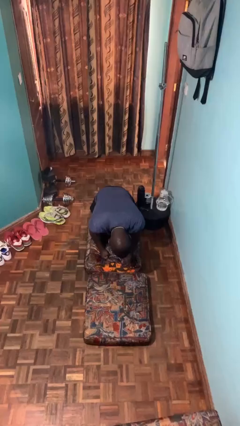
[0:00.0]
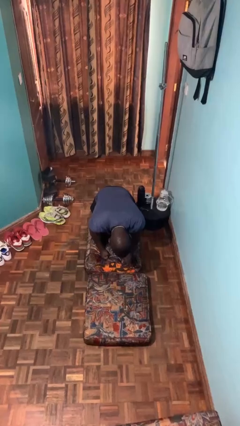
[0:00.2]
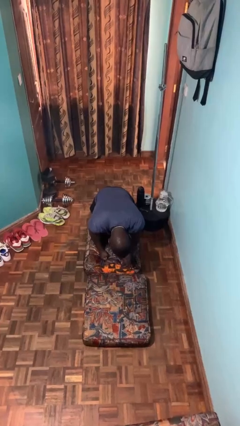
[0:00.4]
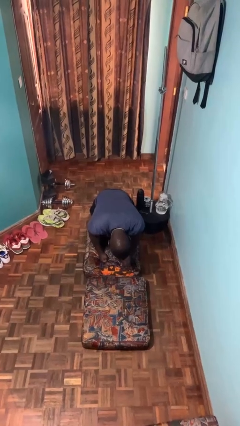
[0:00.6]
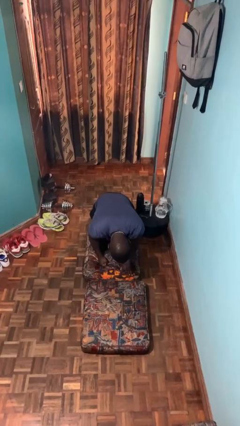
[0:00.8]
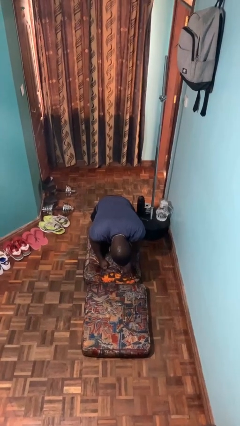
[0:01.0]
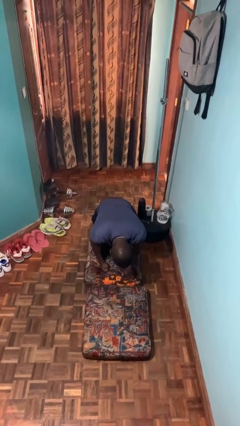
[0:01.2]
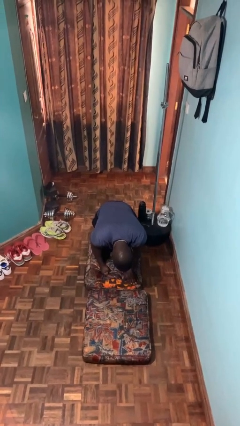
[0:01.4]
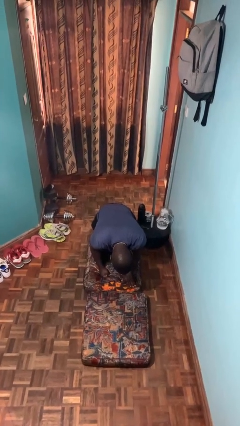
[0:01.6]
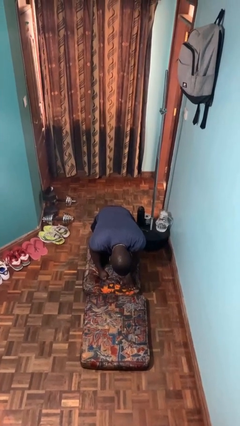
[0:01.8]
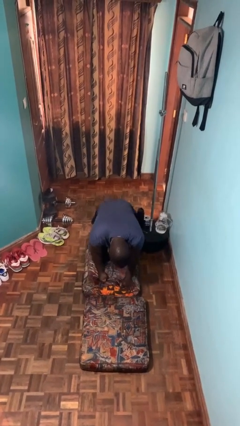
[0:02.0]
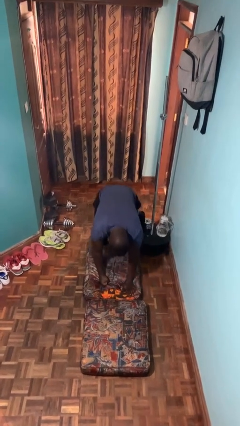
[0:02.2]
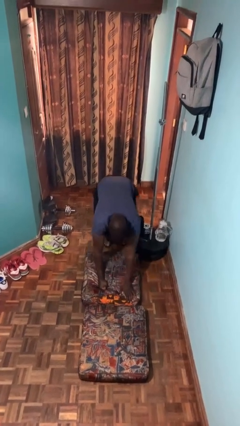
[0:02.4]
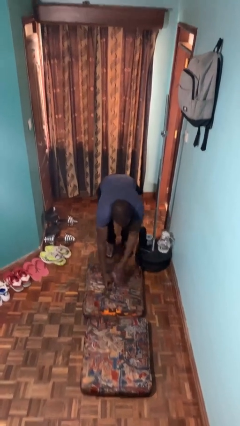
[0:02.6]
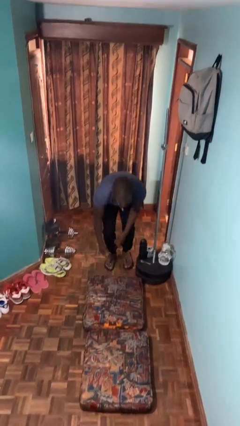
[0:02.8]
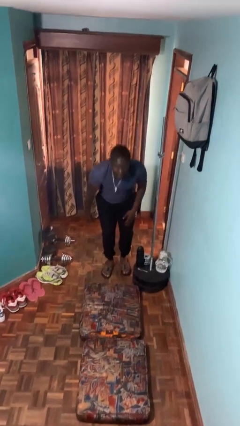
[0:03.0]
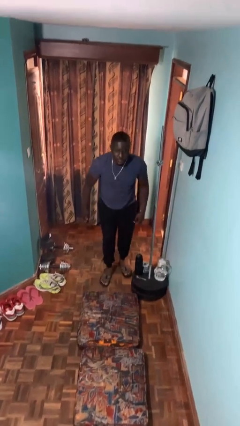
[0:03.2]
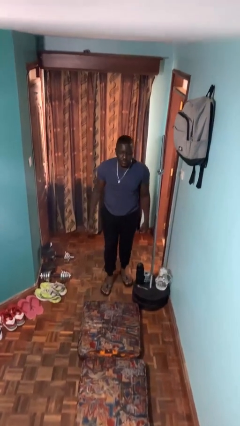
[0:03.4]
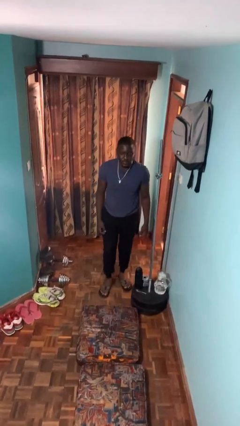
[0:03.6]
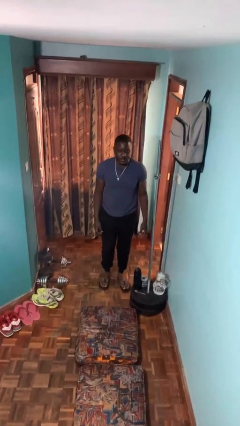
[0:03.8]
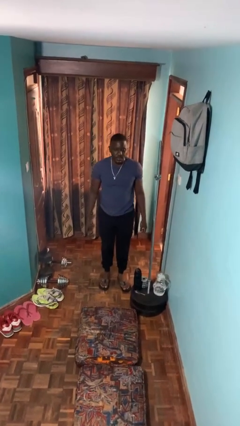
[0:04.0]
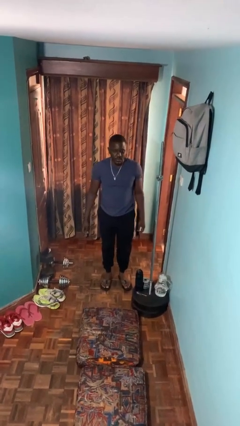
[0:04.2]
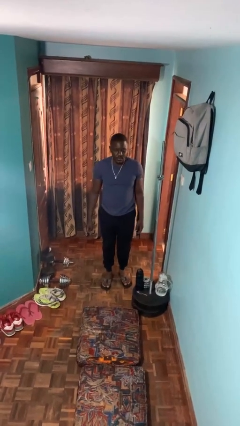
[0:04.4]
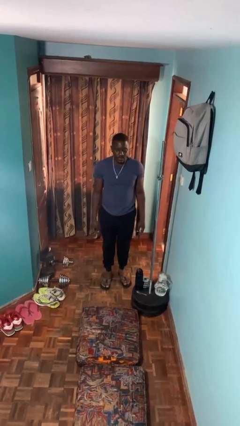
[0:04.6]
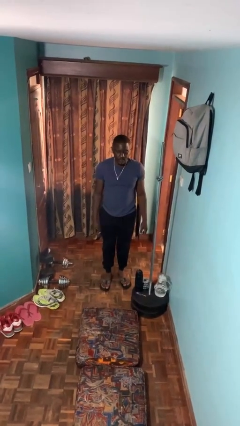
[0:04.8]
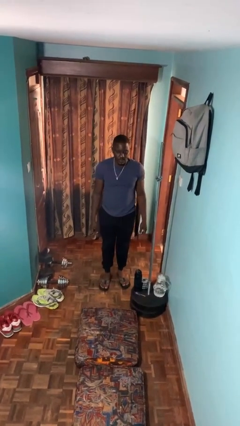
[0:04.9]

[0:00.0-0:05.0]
person stands up from floor

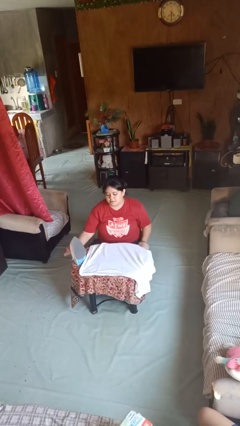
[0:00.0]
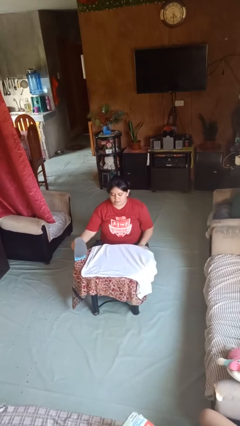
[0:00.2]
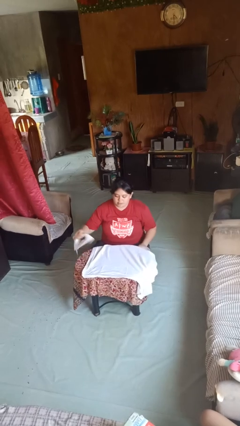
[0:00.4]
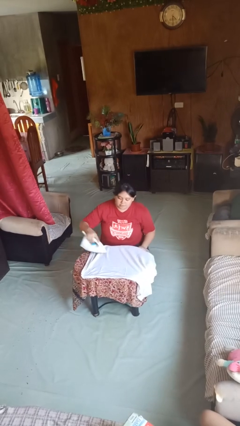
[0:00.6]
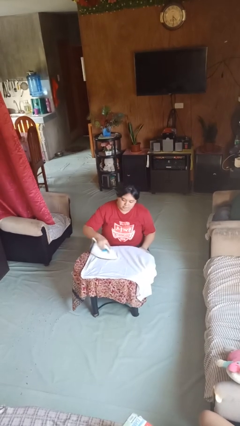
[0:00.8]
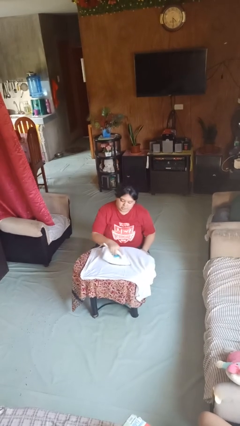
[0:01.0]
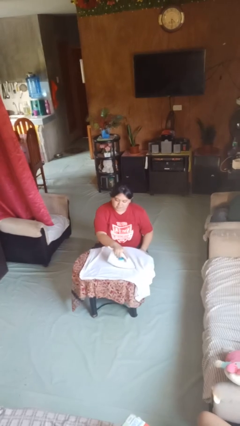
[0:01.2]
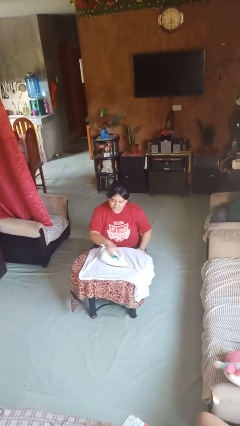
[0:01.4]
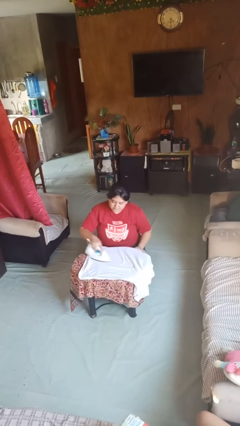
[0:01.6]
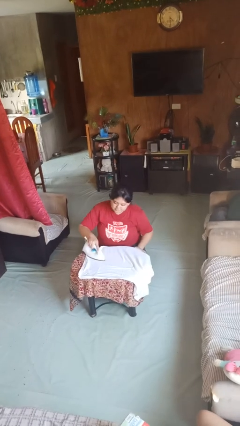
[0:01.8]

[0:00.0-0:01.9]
person irons clothes

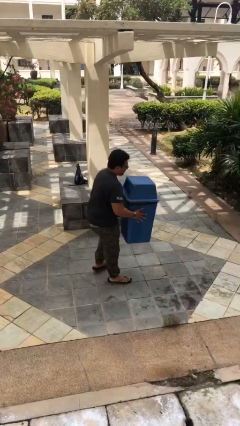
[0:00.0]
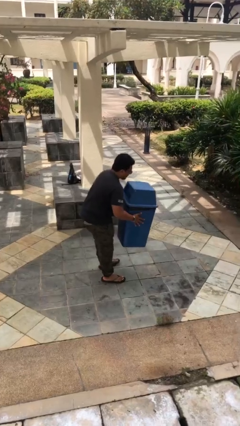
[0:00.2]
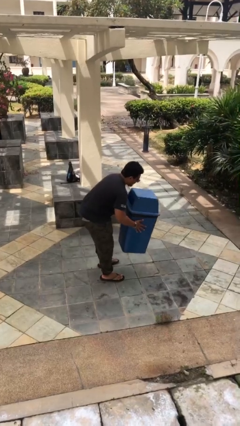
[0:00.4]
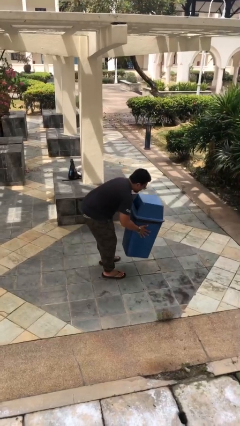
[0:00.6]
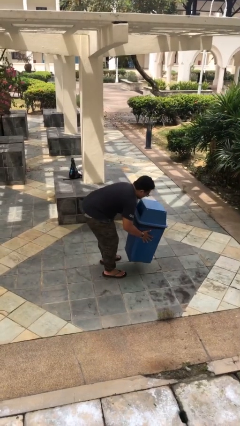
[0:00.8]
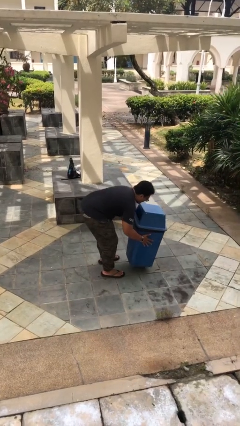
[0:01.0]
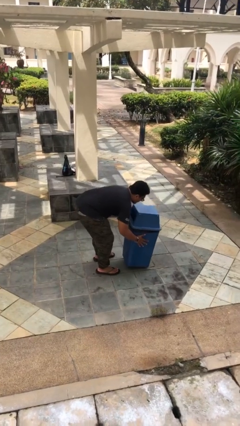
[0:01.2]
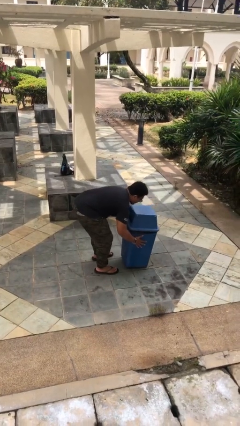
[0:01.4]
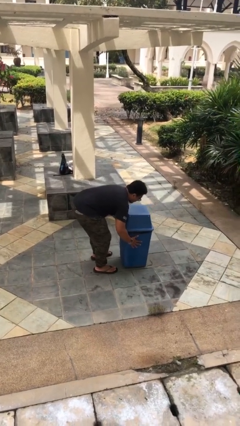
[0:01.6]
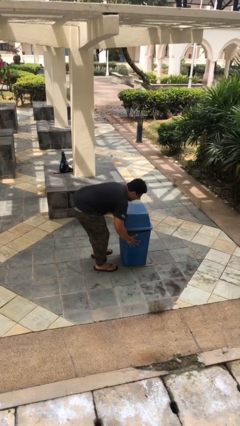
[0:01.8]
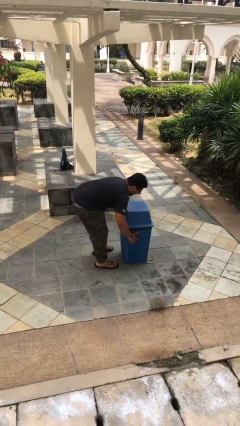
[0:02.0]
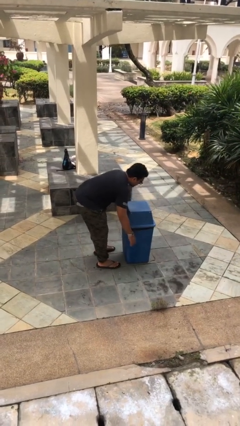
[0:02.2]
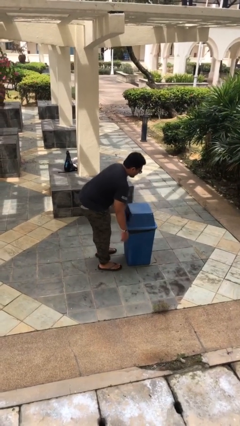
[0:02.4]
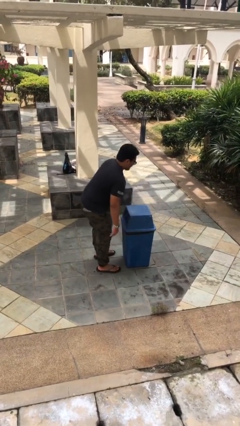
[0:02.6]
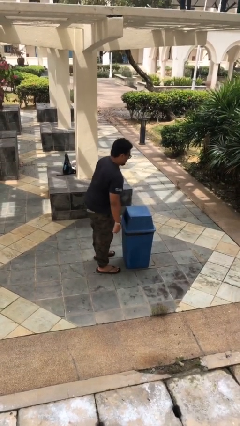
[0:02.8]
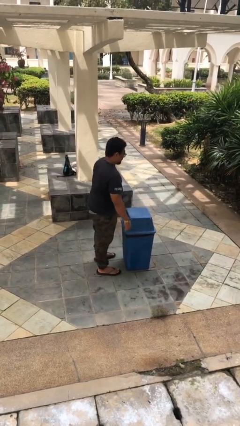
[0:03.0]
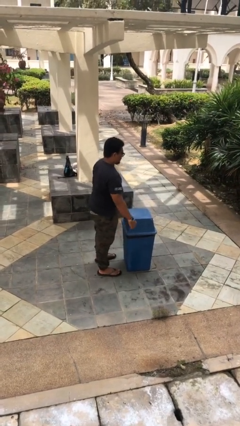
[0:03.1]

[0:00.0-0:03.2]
person puts down object on floor

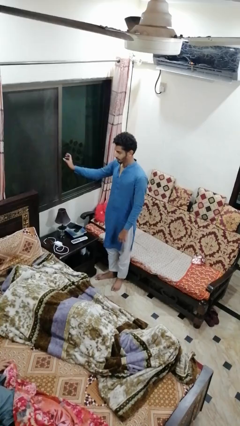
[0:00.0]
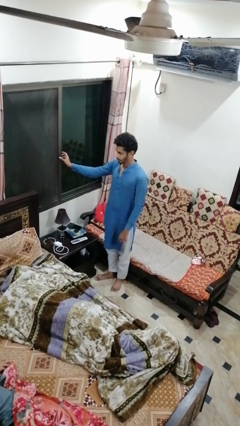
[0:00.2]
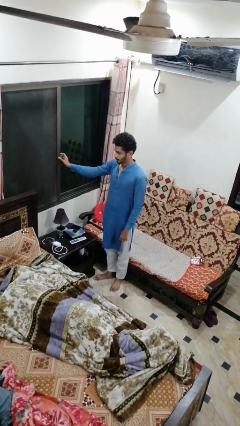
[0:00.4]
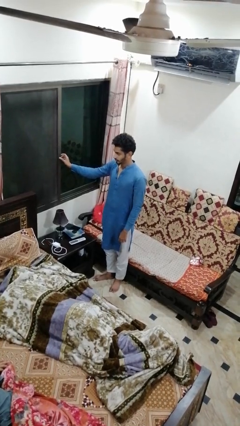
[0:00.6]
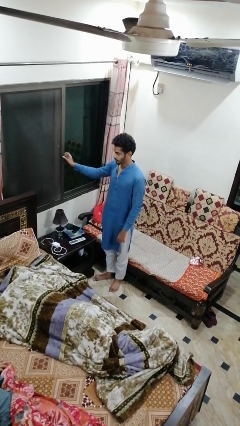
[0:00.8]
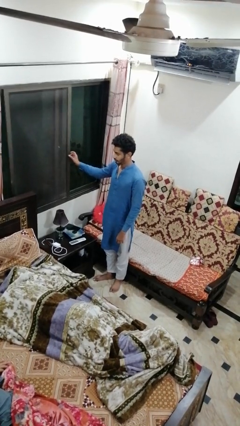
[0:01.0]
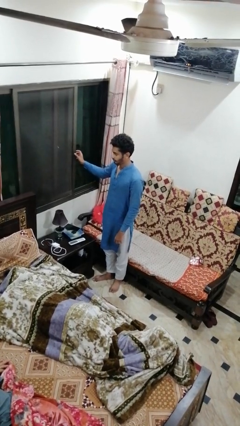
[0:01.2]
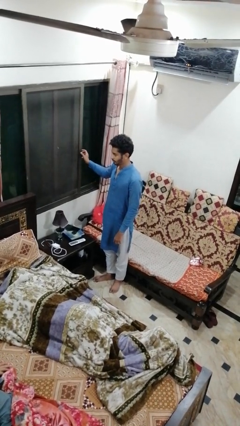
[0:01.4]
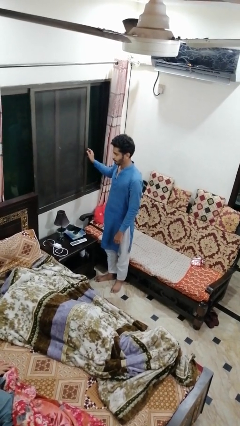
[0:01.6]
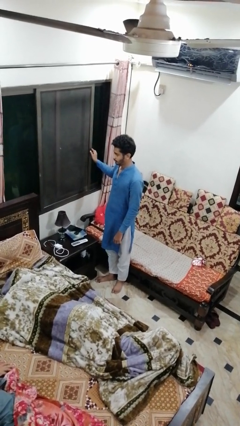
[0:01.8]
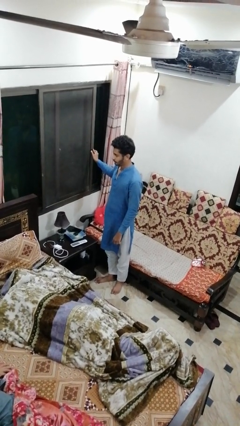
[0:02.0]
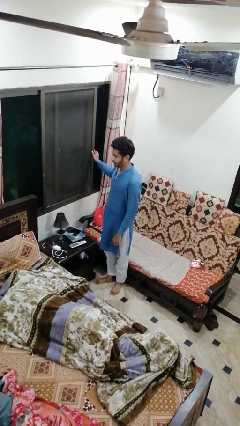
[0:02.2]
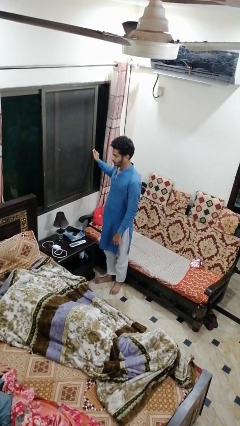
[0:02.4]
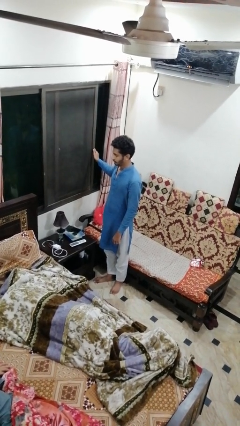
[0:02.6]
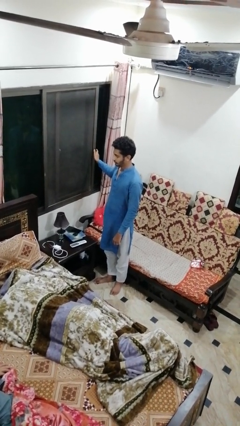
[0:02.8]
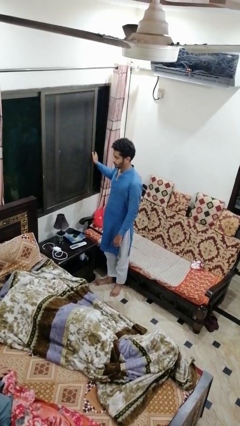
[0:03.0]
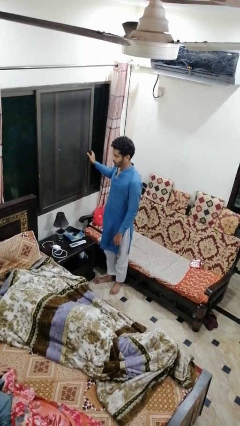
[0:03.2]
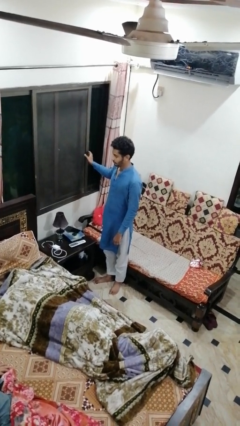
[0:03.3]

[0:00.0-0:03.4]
person opens home window

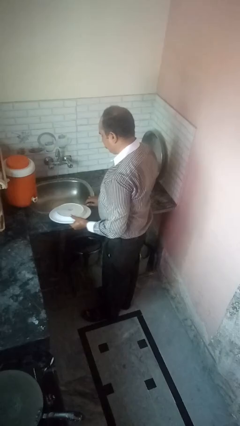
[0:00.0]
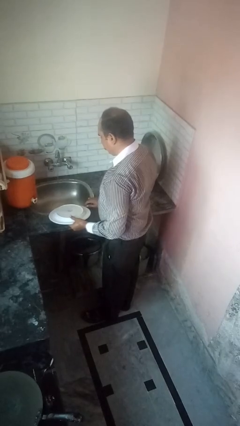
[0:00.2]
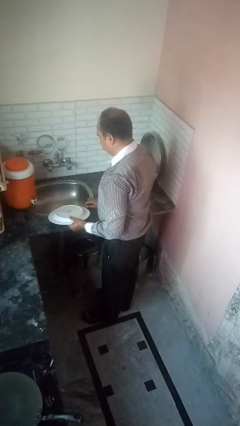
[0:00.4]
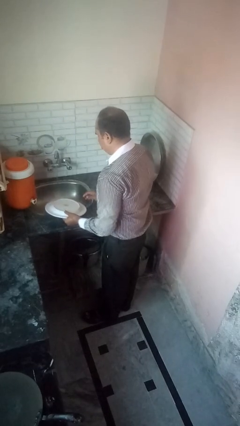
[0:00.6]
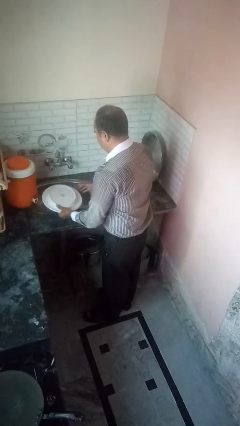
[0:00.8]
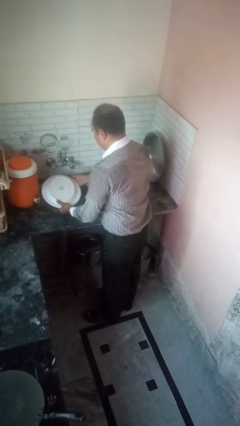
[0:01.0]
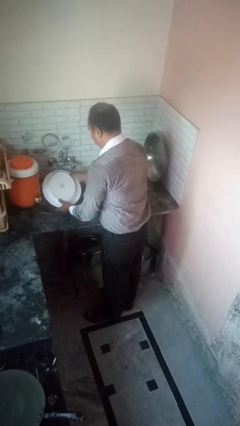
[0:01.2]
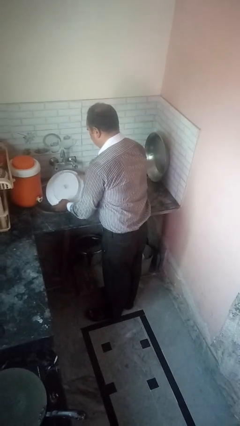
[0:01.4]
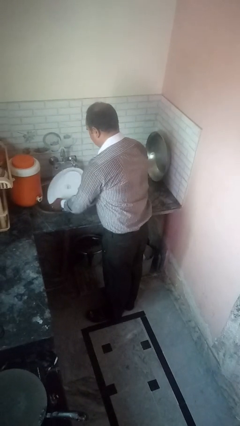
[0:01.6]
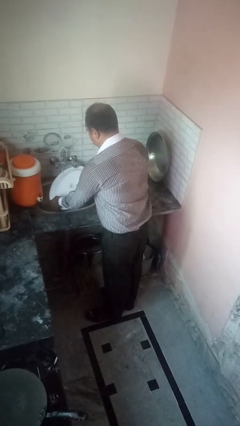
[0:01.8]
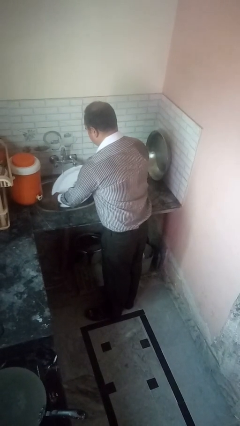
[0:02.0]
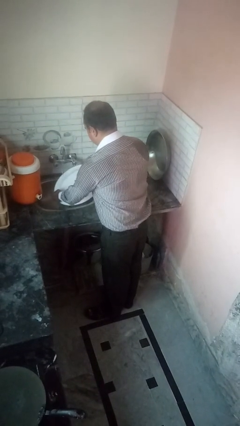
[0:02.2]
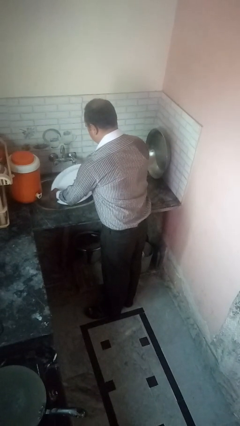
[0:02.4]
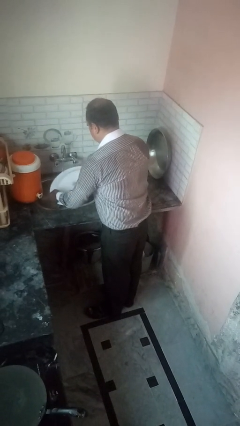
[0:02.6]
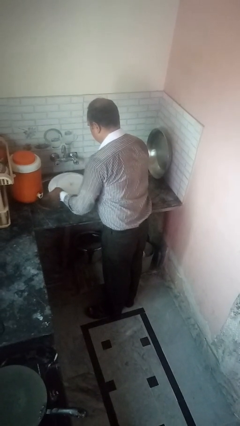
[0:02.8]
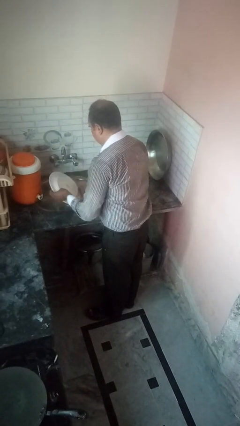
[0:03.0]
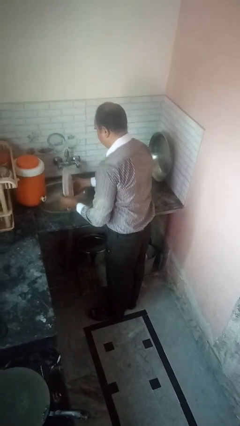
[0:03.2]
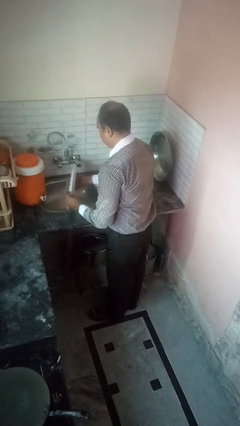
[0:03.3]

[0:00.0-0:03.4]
person washes dish

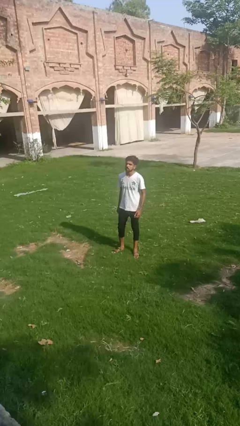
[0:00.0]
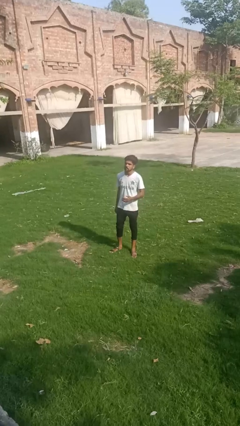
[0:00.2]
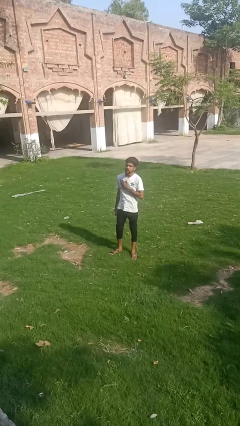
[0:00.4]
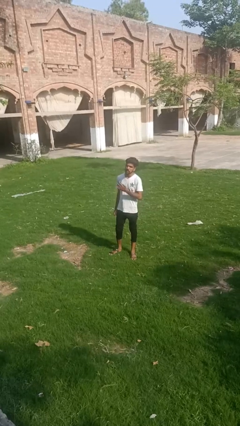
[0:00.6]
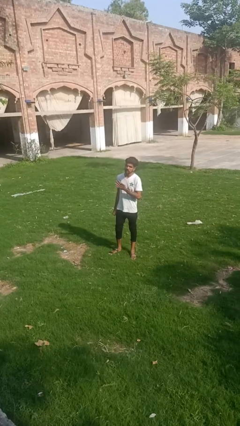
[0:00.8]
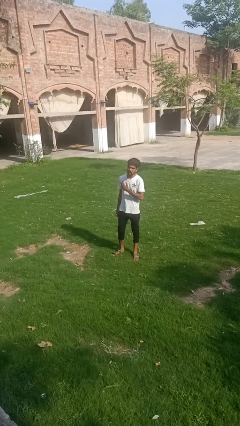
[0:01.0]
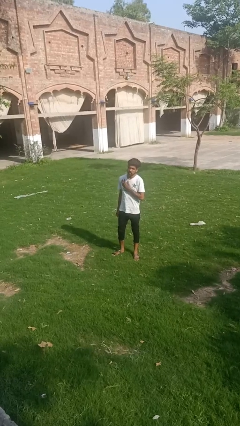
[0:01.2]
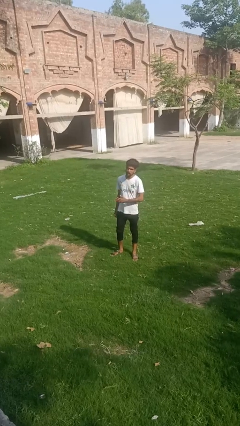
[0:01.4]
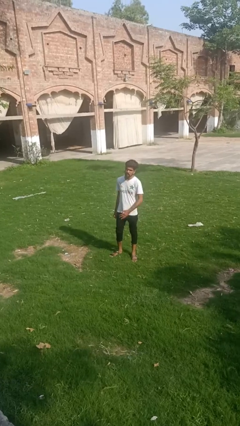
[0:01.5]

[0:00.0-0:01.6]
person drums on chest
